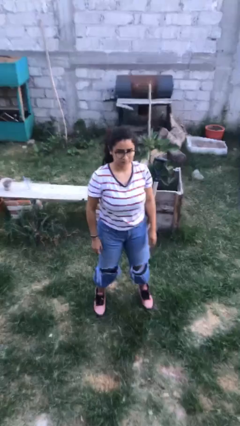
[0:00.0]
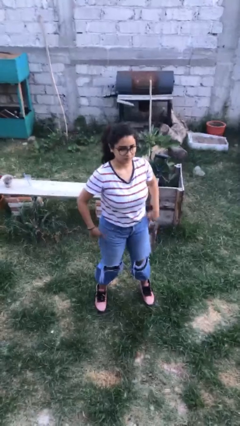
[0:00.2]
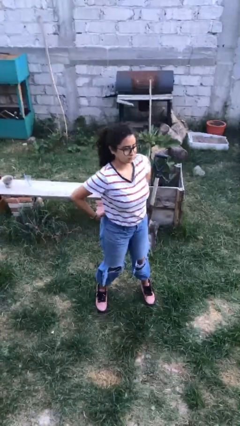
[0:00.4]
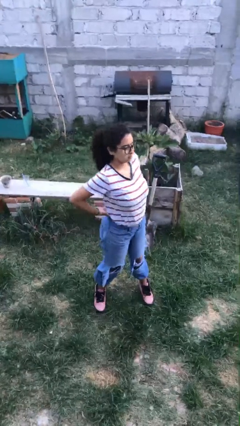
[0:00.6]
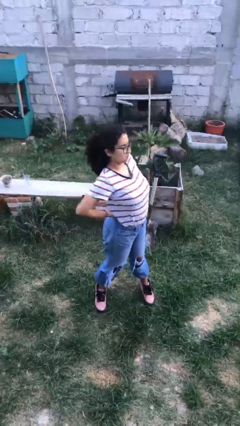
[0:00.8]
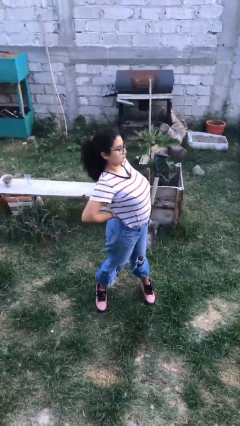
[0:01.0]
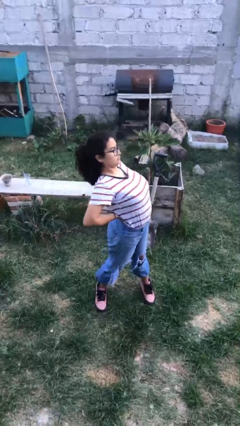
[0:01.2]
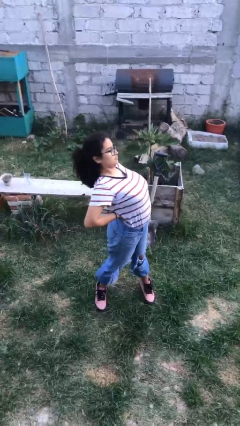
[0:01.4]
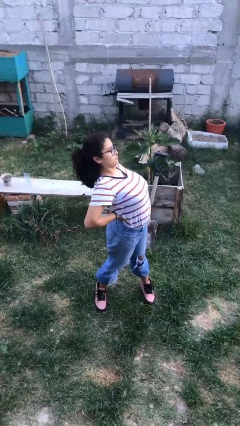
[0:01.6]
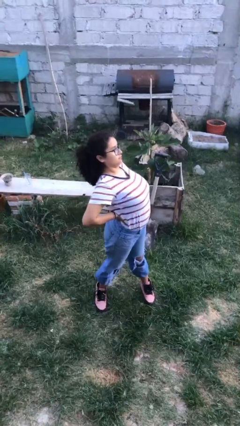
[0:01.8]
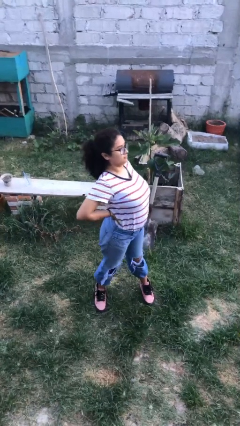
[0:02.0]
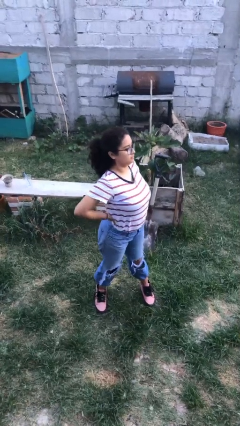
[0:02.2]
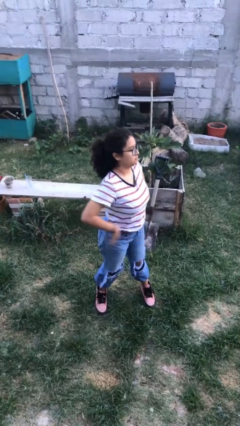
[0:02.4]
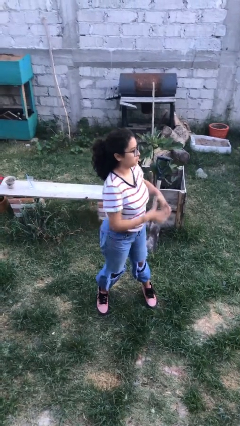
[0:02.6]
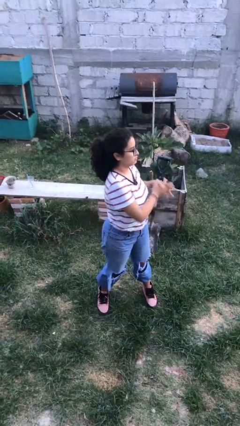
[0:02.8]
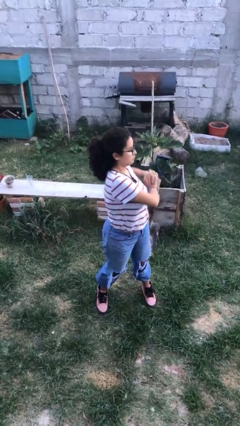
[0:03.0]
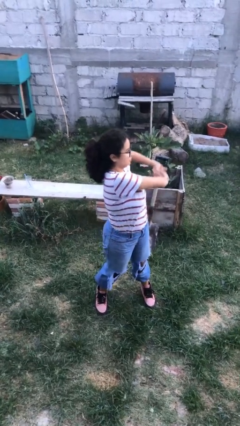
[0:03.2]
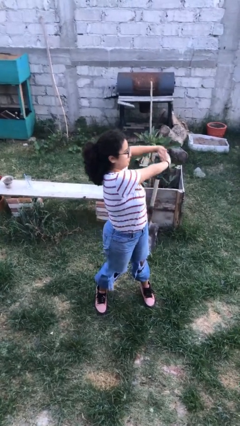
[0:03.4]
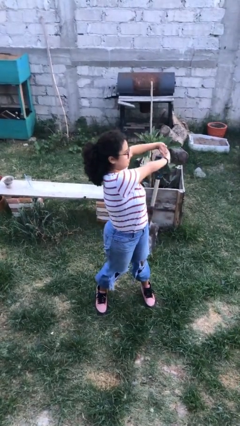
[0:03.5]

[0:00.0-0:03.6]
person stretches back

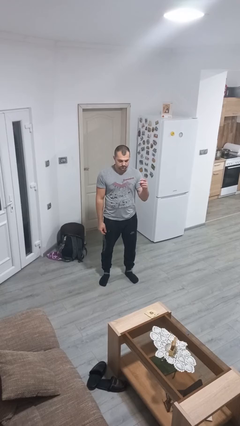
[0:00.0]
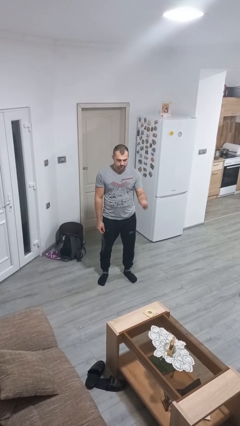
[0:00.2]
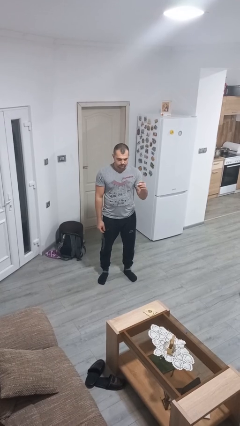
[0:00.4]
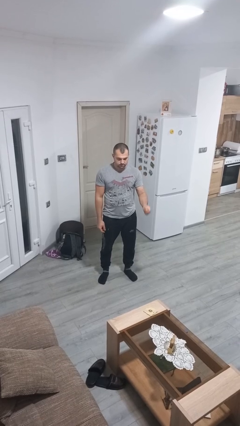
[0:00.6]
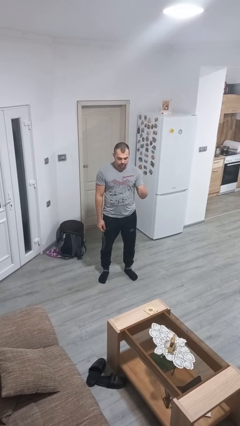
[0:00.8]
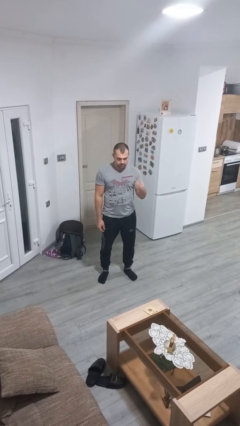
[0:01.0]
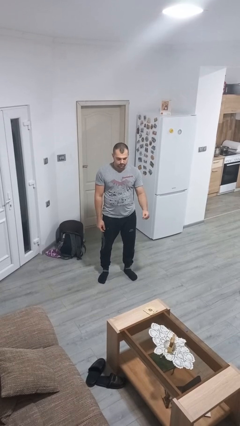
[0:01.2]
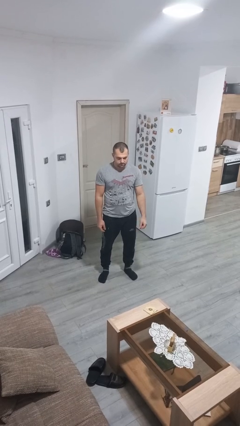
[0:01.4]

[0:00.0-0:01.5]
person snaps fingers

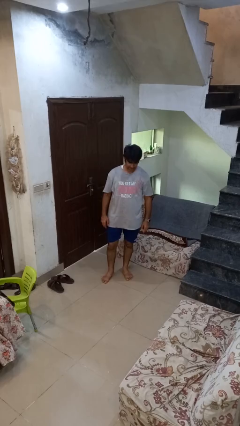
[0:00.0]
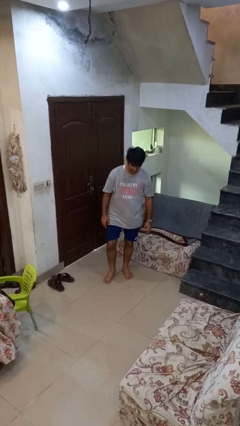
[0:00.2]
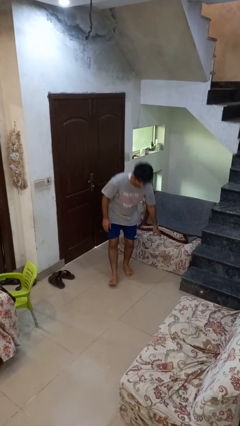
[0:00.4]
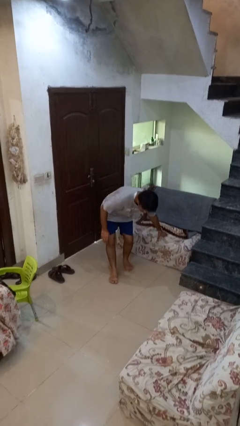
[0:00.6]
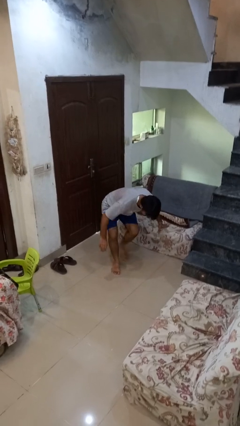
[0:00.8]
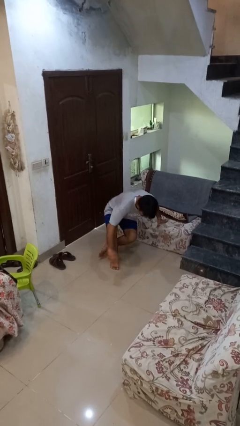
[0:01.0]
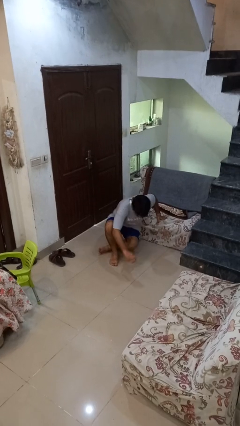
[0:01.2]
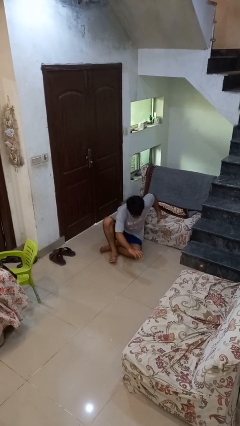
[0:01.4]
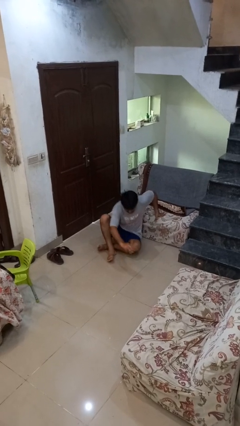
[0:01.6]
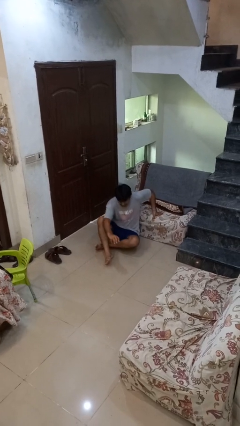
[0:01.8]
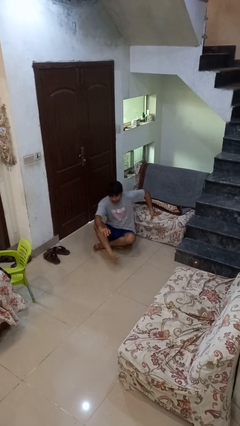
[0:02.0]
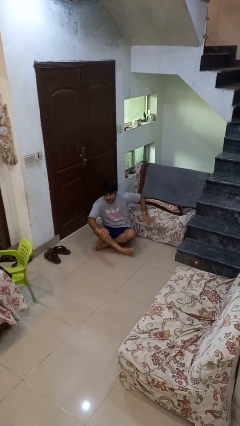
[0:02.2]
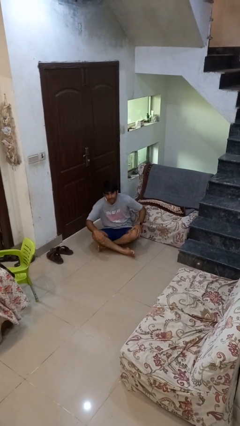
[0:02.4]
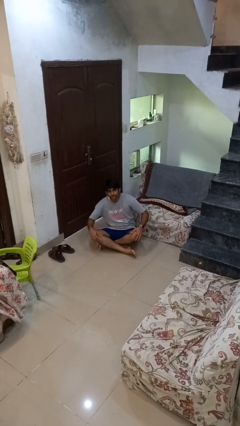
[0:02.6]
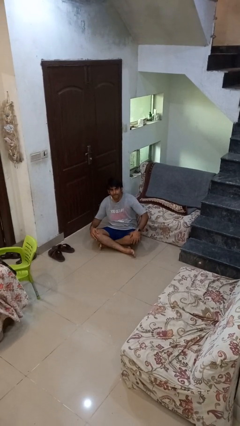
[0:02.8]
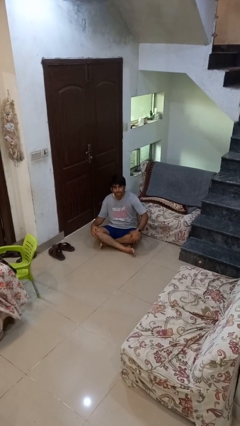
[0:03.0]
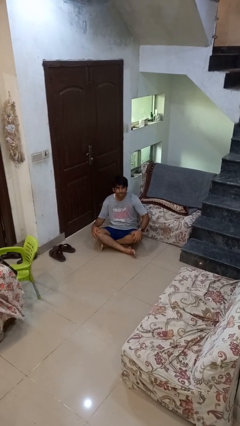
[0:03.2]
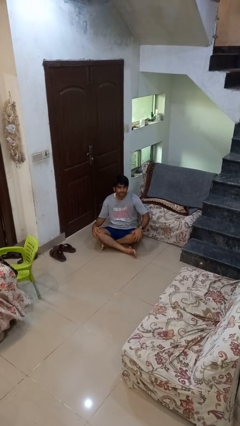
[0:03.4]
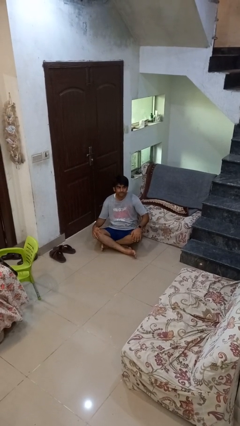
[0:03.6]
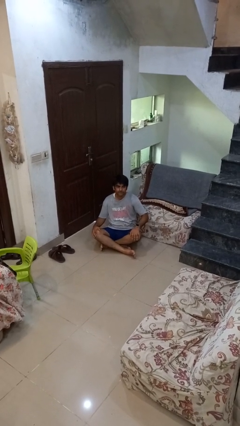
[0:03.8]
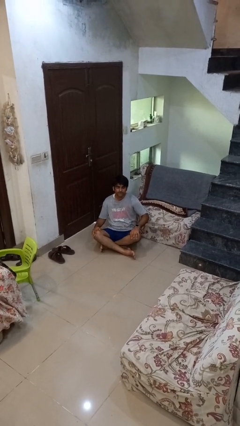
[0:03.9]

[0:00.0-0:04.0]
person sits crisscross

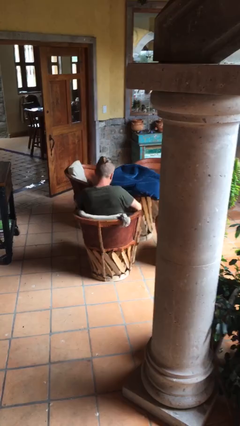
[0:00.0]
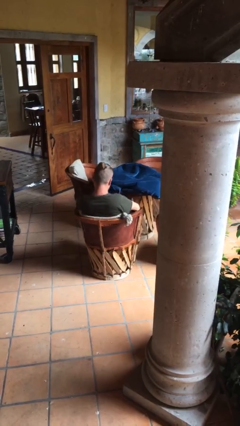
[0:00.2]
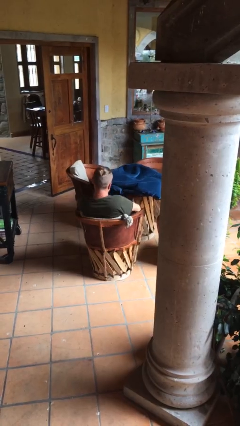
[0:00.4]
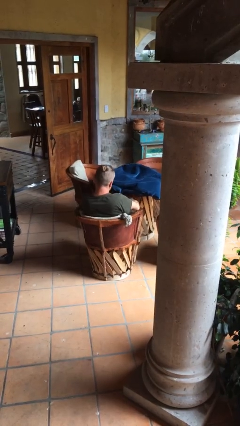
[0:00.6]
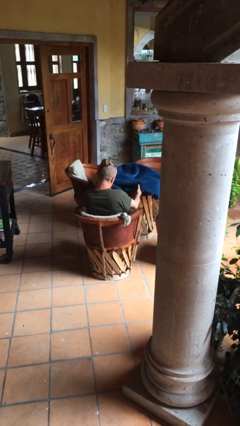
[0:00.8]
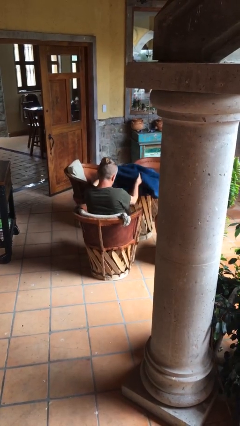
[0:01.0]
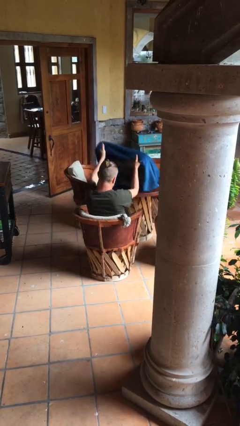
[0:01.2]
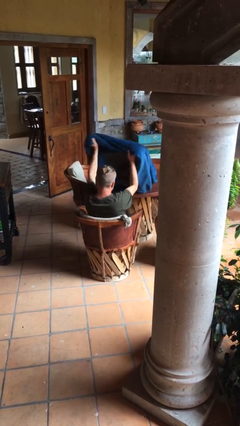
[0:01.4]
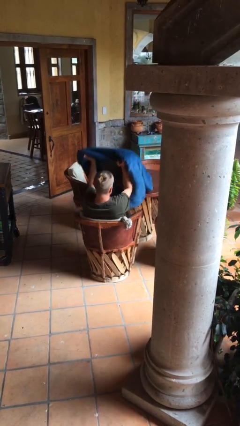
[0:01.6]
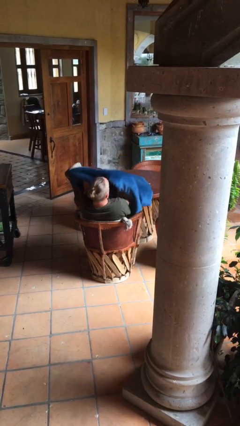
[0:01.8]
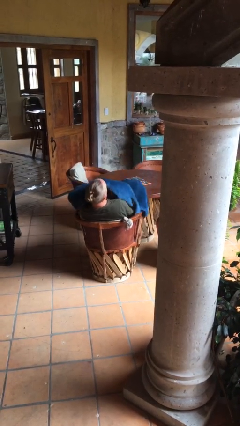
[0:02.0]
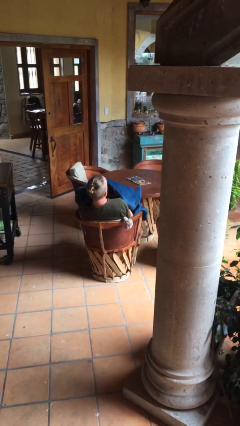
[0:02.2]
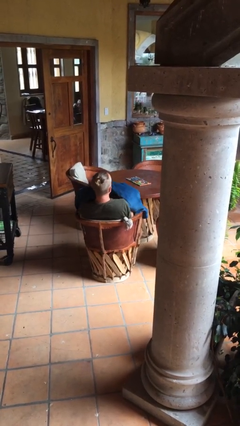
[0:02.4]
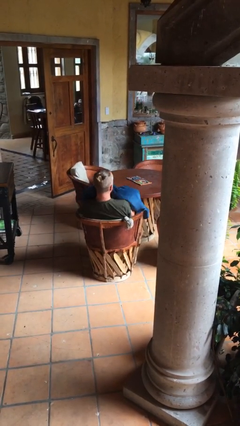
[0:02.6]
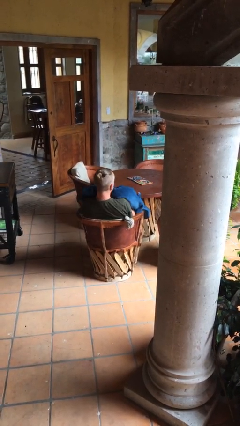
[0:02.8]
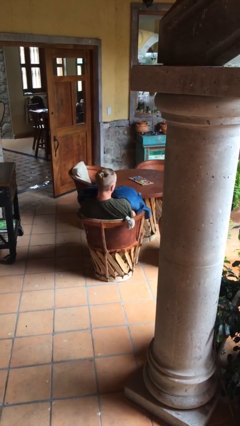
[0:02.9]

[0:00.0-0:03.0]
person covers with blanket

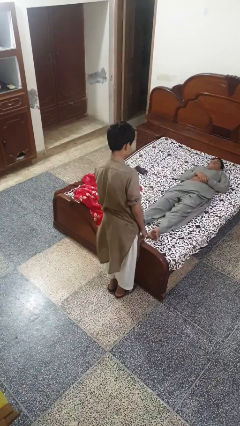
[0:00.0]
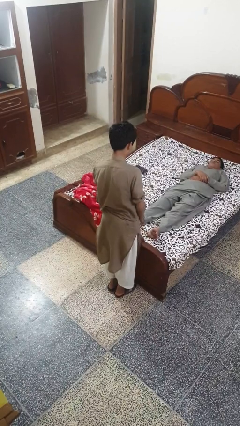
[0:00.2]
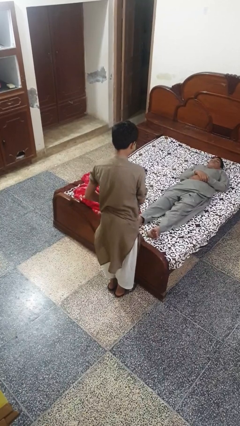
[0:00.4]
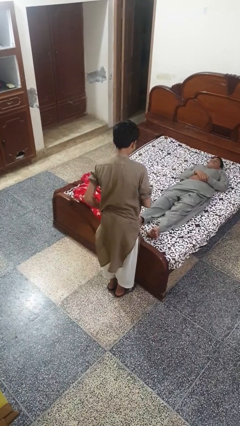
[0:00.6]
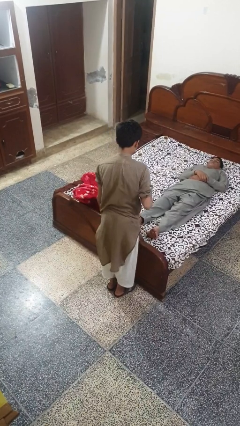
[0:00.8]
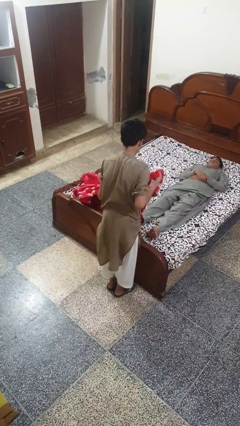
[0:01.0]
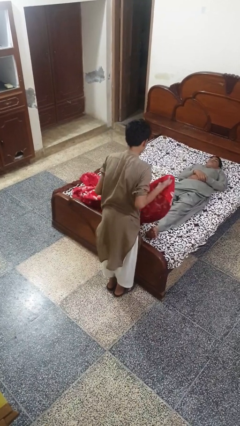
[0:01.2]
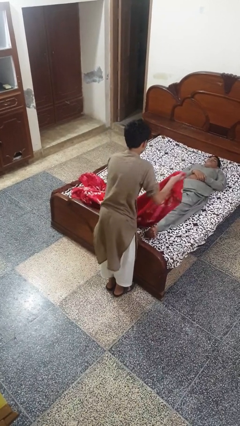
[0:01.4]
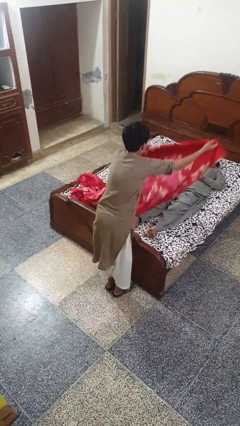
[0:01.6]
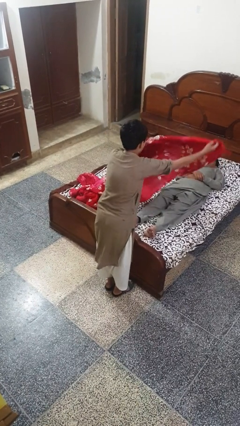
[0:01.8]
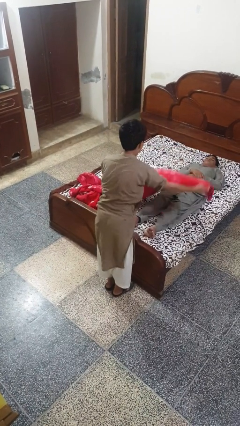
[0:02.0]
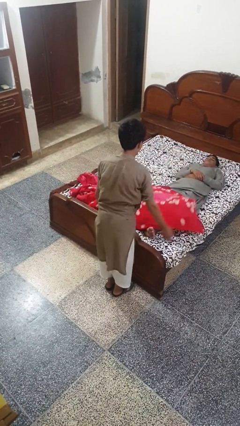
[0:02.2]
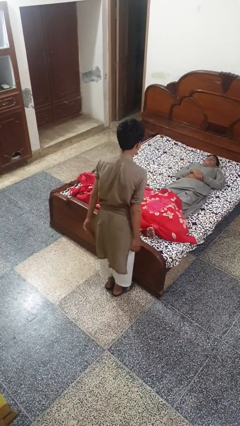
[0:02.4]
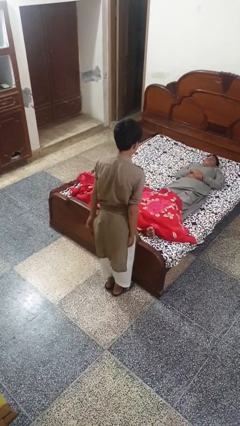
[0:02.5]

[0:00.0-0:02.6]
person covers friend with blanket

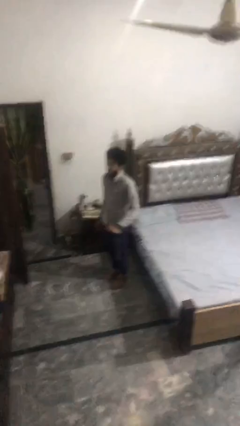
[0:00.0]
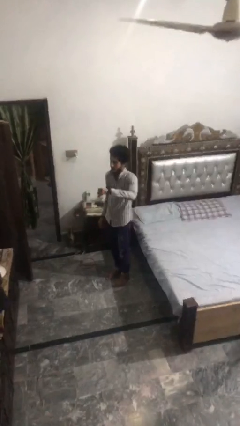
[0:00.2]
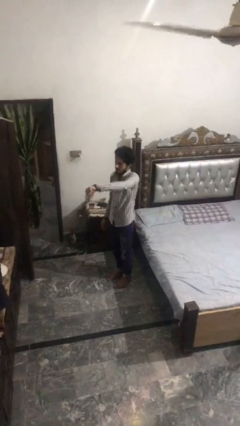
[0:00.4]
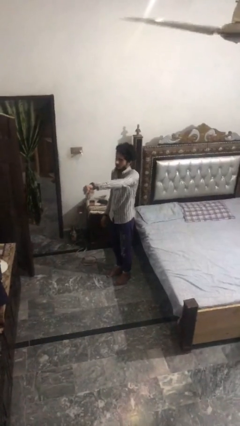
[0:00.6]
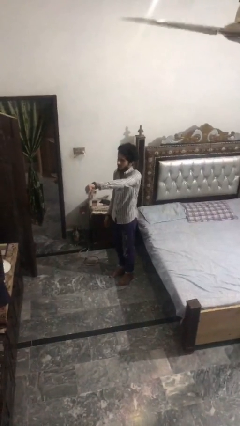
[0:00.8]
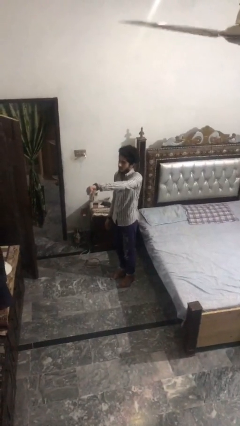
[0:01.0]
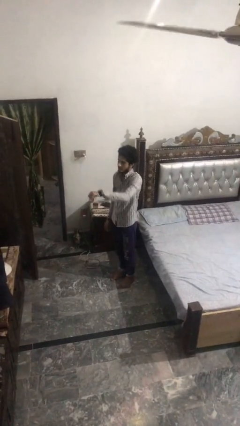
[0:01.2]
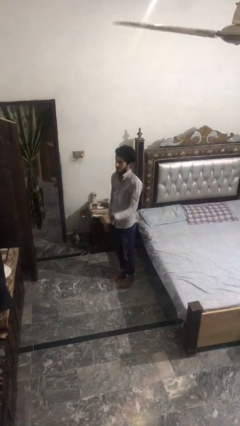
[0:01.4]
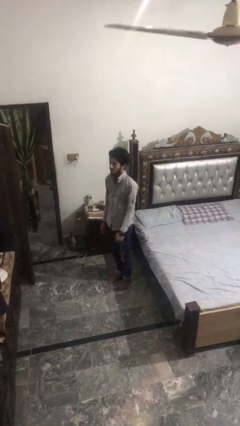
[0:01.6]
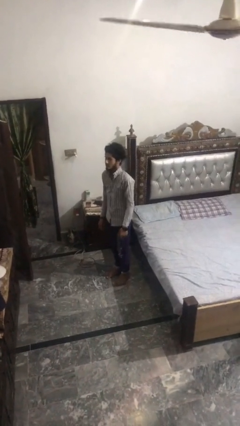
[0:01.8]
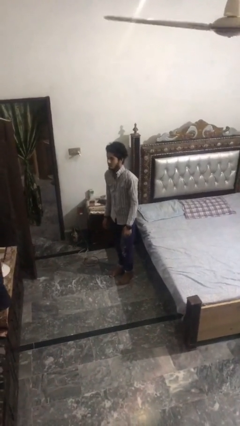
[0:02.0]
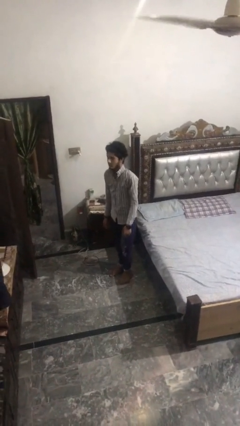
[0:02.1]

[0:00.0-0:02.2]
person gestures thumbs down

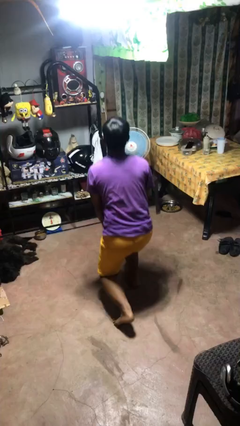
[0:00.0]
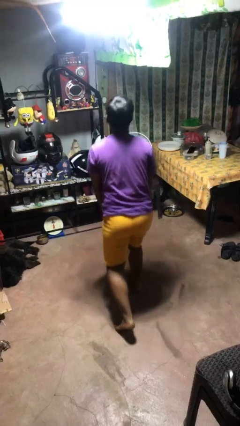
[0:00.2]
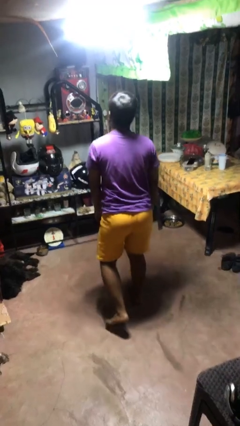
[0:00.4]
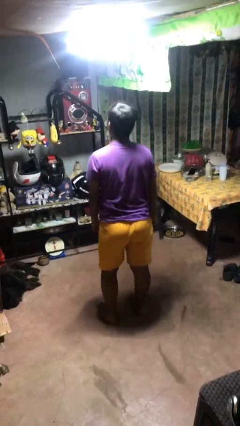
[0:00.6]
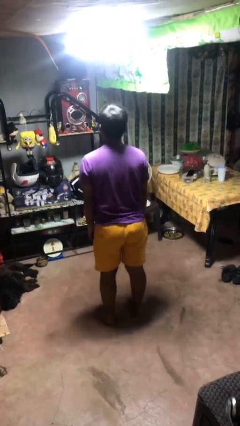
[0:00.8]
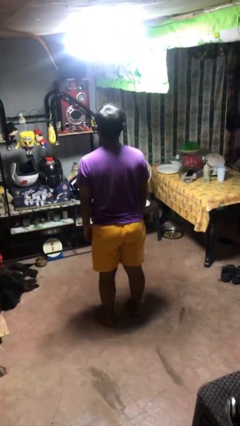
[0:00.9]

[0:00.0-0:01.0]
person stands up from floor
